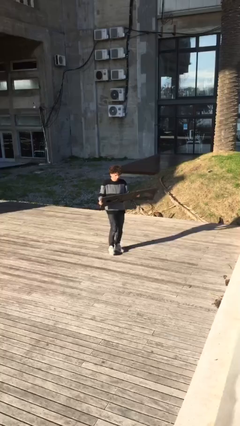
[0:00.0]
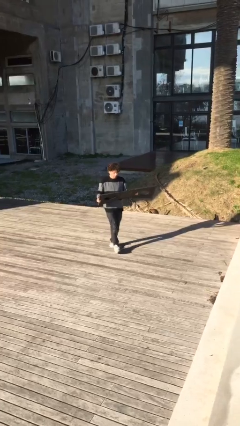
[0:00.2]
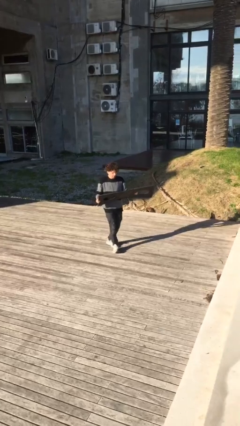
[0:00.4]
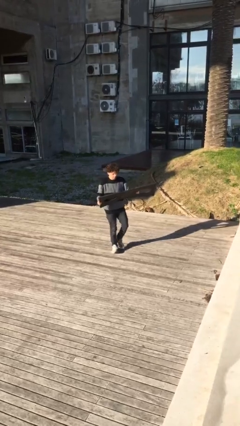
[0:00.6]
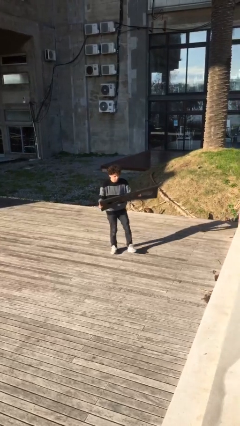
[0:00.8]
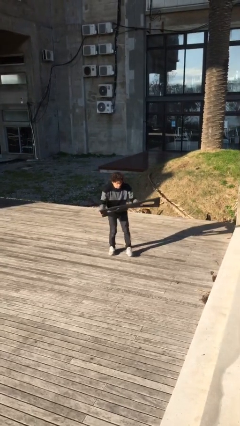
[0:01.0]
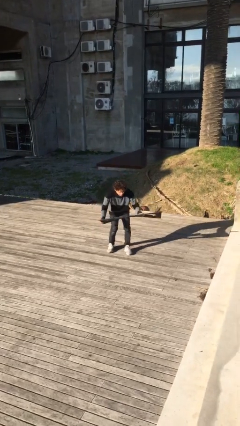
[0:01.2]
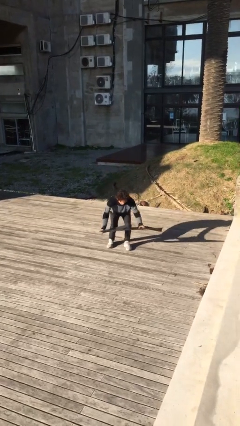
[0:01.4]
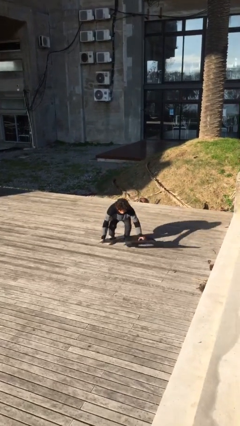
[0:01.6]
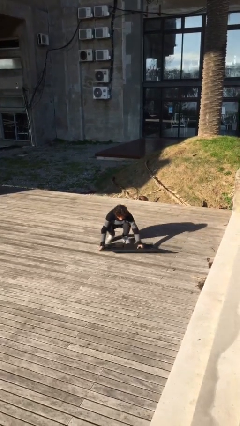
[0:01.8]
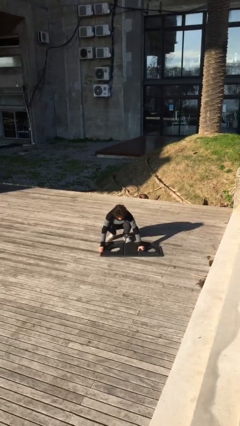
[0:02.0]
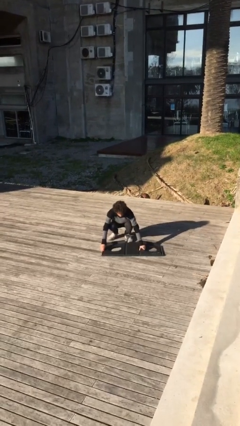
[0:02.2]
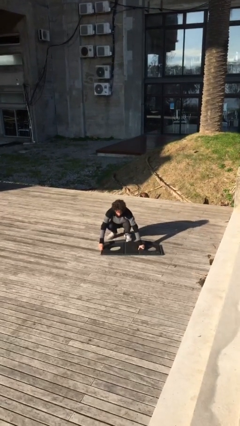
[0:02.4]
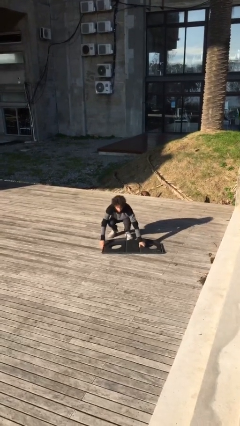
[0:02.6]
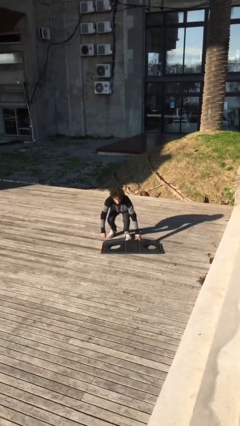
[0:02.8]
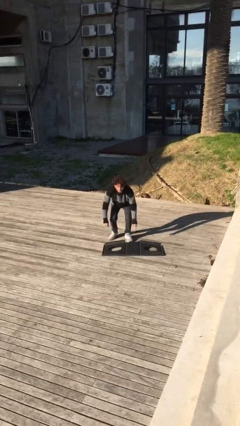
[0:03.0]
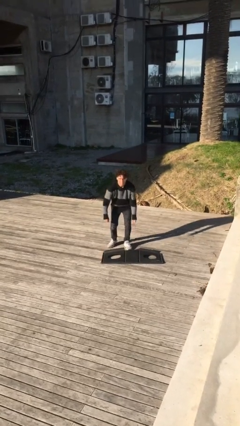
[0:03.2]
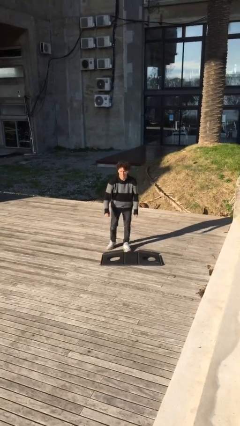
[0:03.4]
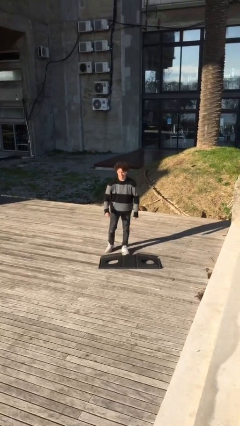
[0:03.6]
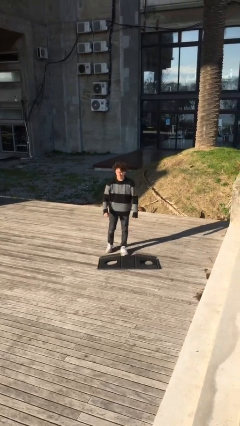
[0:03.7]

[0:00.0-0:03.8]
person puts down object on floor

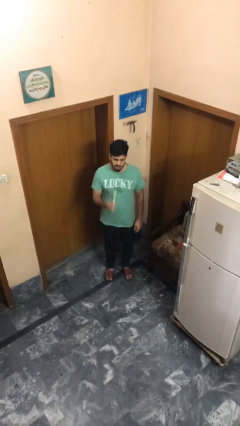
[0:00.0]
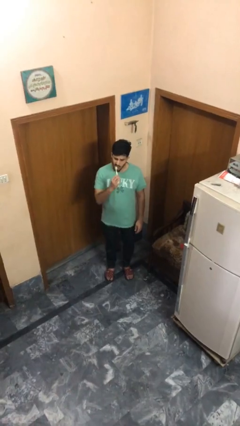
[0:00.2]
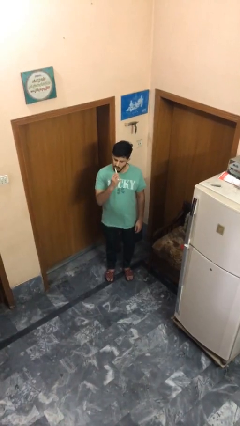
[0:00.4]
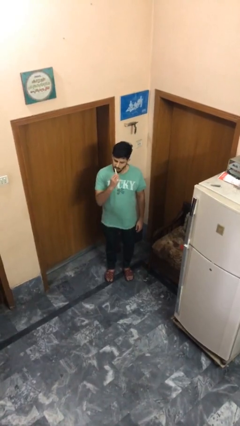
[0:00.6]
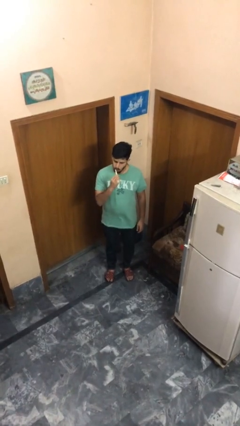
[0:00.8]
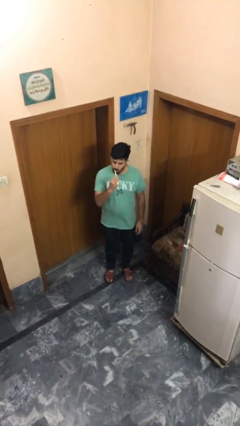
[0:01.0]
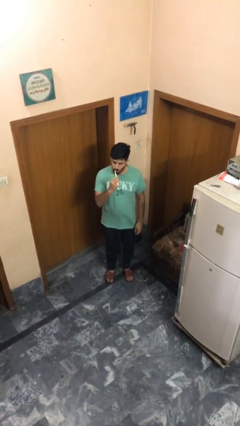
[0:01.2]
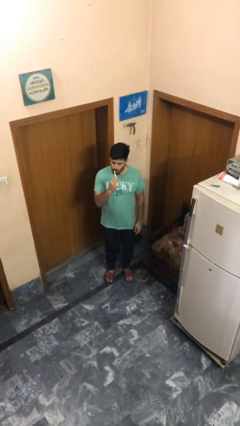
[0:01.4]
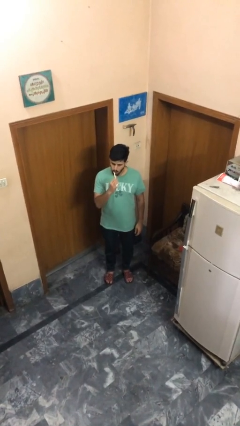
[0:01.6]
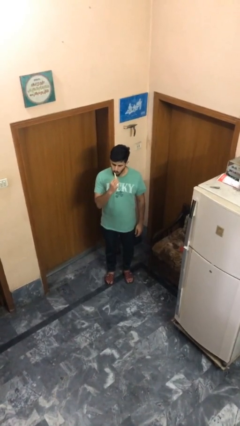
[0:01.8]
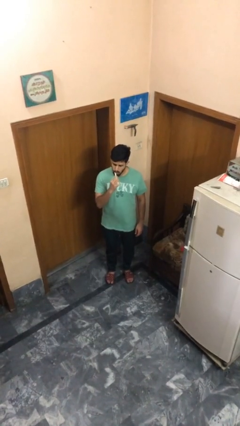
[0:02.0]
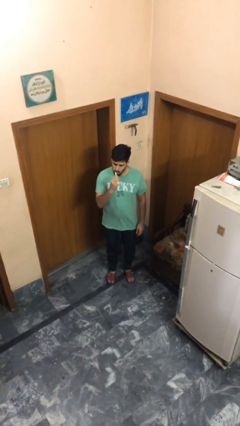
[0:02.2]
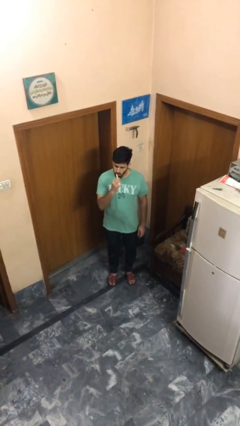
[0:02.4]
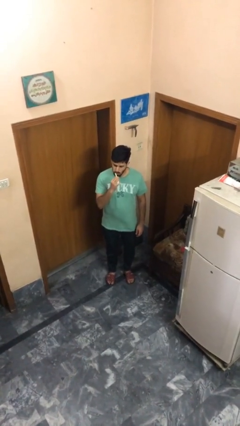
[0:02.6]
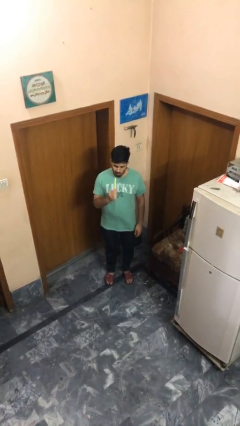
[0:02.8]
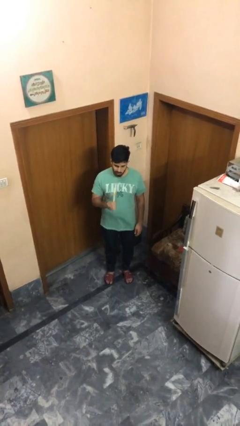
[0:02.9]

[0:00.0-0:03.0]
person brushes teeth

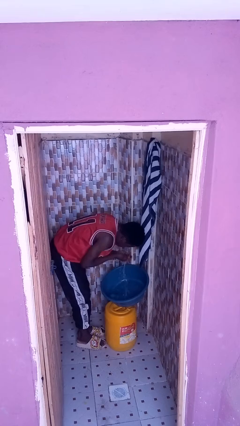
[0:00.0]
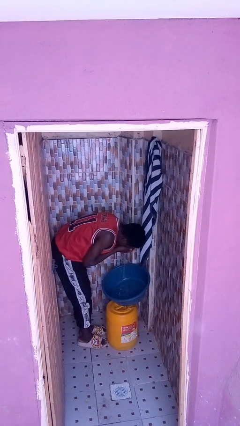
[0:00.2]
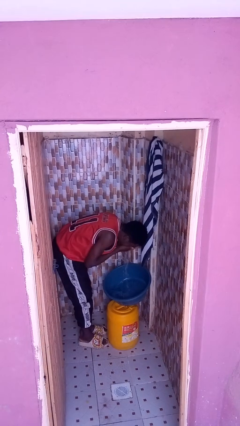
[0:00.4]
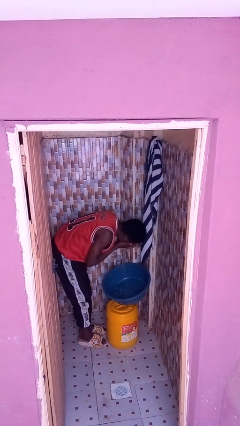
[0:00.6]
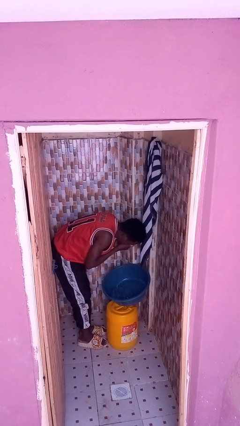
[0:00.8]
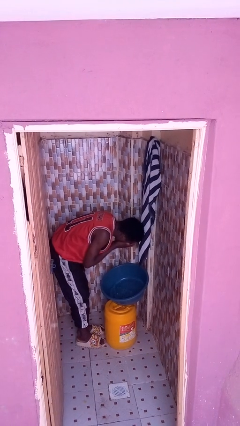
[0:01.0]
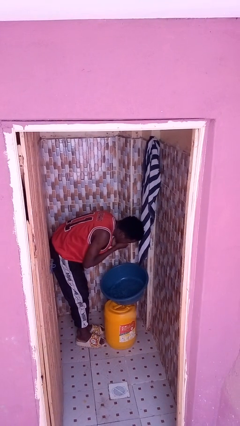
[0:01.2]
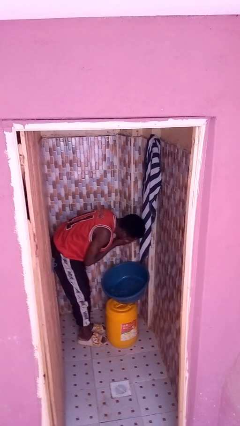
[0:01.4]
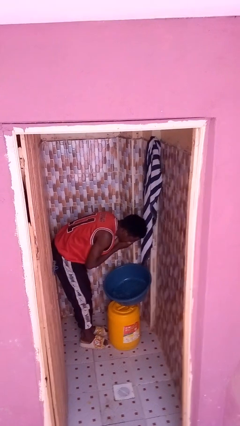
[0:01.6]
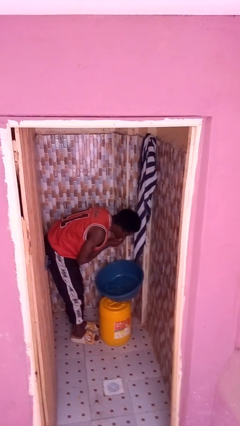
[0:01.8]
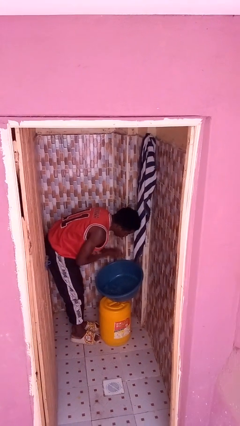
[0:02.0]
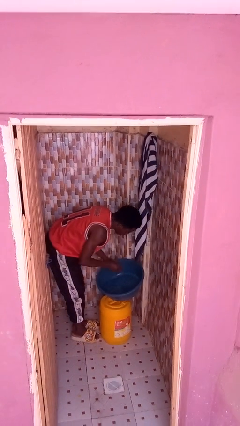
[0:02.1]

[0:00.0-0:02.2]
person washes face

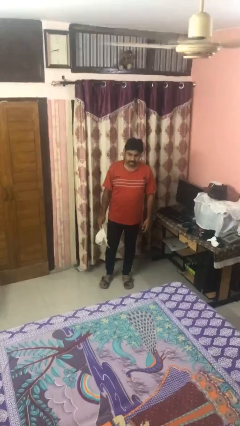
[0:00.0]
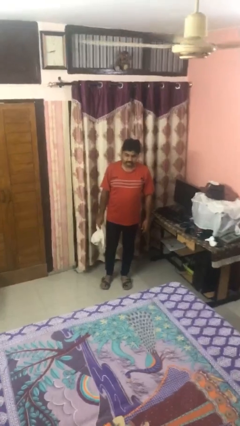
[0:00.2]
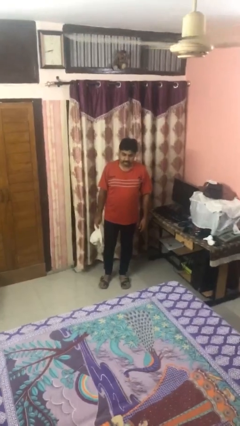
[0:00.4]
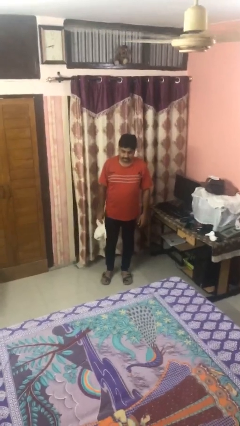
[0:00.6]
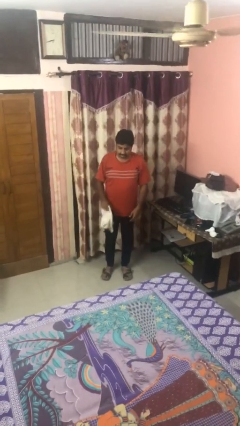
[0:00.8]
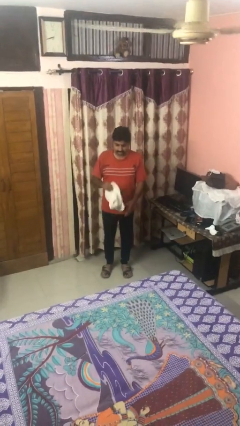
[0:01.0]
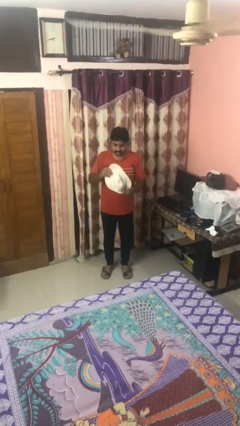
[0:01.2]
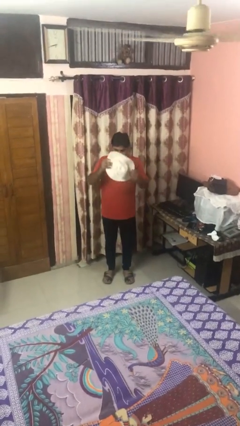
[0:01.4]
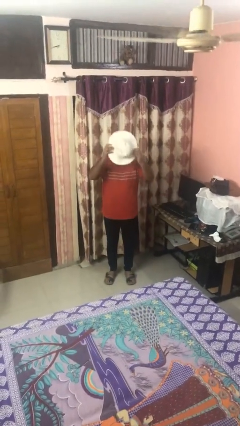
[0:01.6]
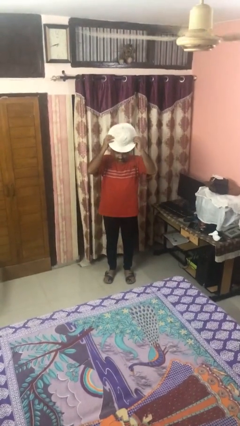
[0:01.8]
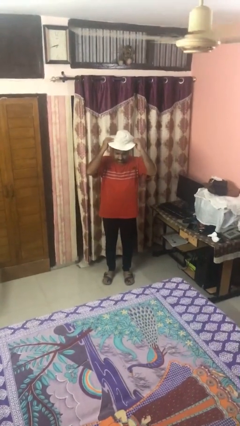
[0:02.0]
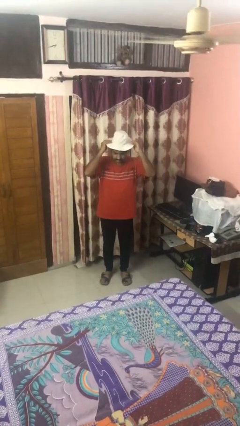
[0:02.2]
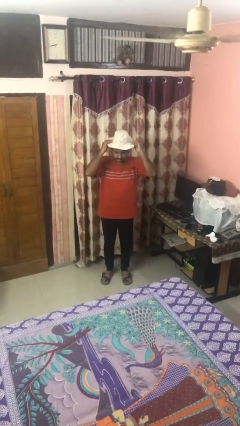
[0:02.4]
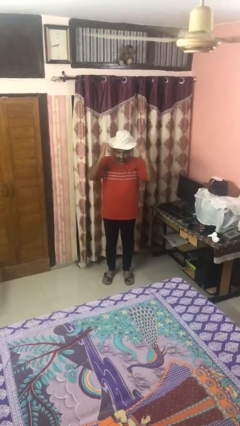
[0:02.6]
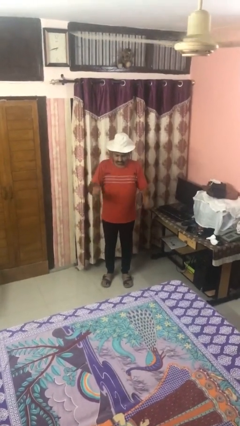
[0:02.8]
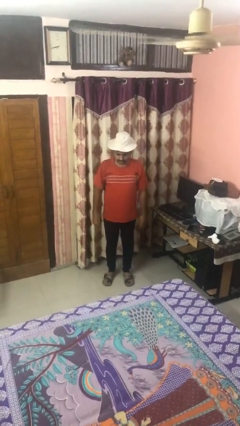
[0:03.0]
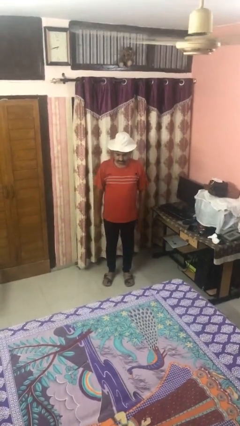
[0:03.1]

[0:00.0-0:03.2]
person puts on hat

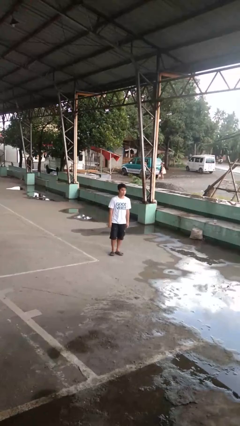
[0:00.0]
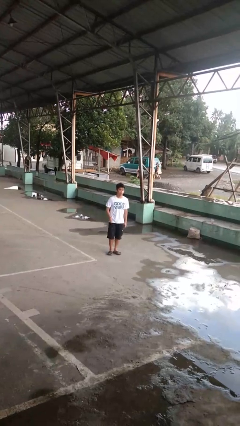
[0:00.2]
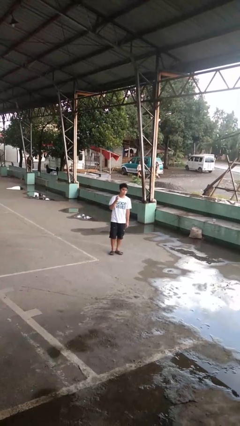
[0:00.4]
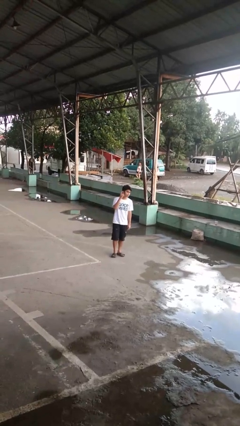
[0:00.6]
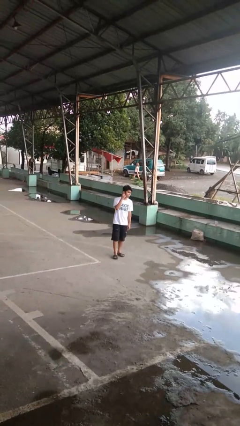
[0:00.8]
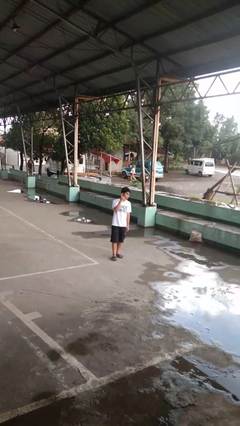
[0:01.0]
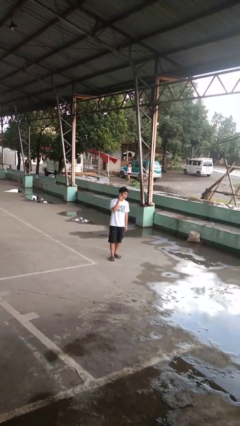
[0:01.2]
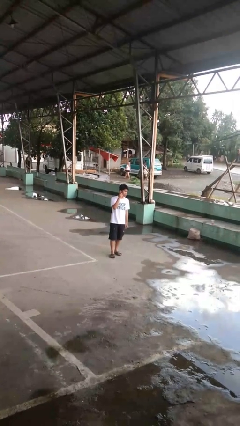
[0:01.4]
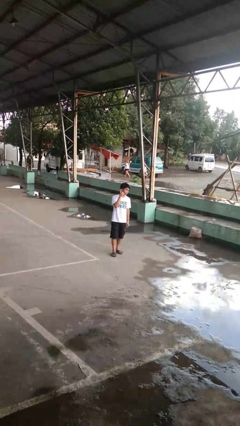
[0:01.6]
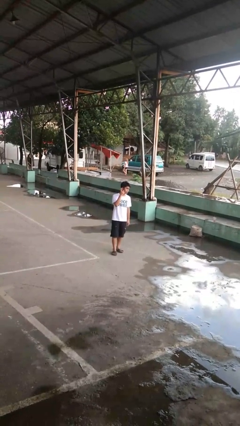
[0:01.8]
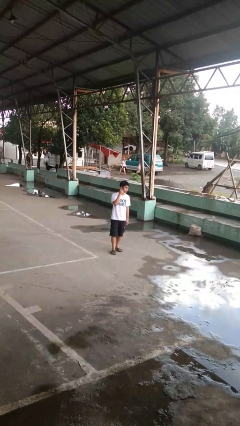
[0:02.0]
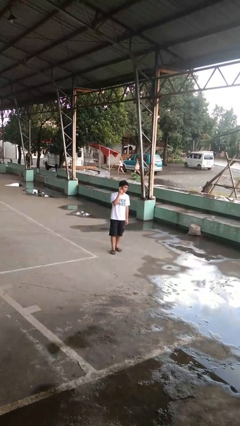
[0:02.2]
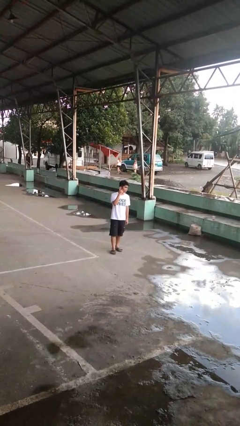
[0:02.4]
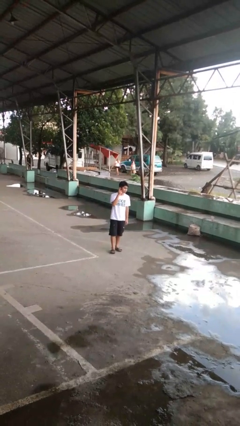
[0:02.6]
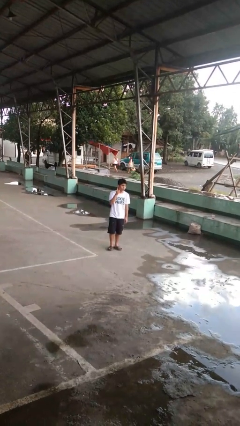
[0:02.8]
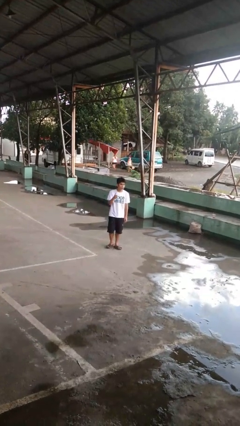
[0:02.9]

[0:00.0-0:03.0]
person gestures listen closely

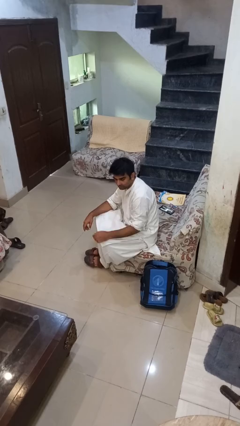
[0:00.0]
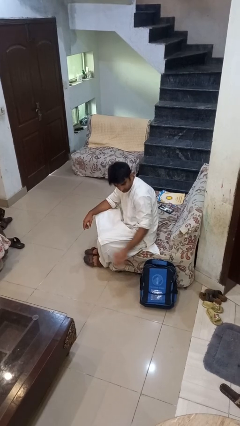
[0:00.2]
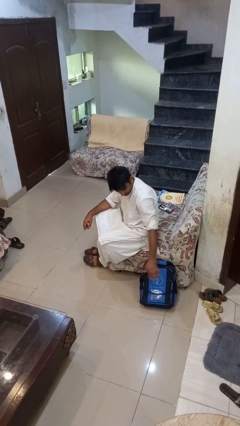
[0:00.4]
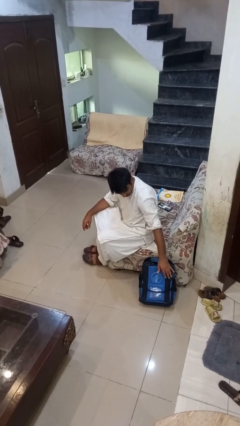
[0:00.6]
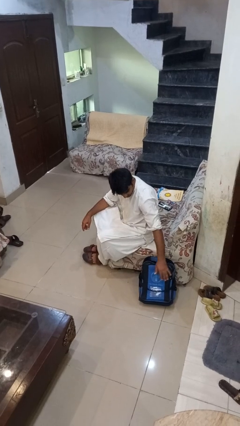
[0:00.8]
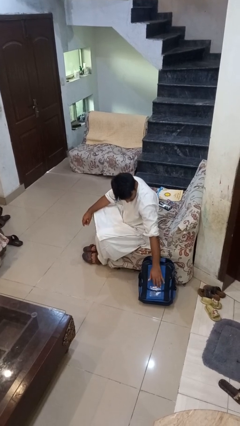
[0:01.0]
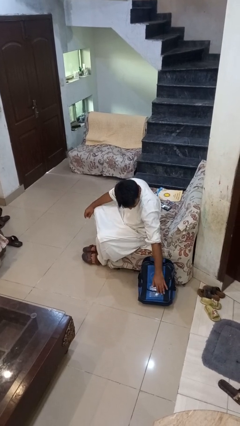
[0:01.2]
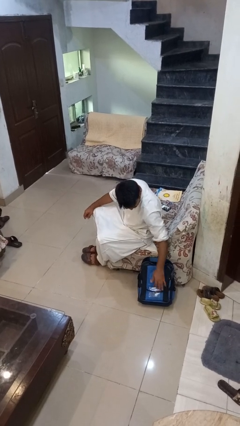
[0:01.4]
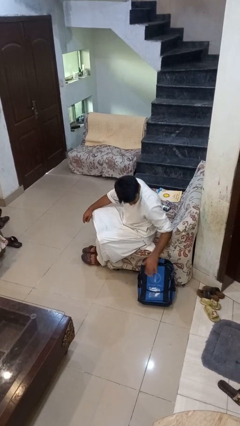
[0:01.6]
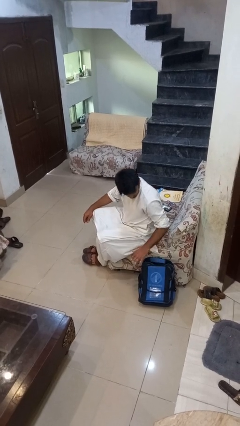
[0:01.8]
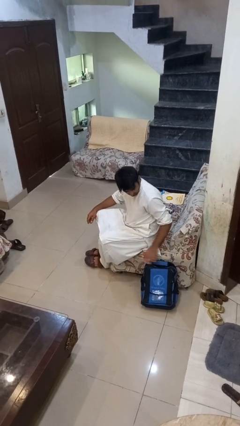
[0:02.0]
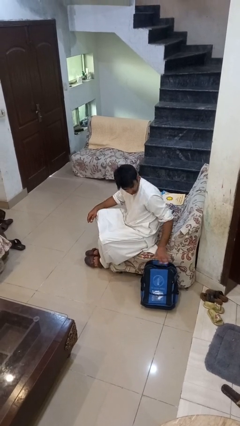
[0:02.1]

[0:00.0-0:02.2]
person waves hand over object
